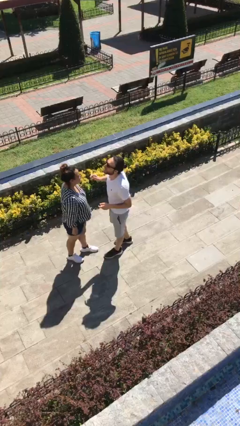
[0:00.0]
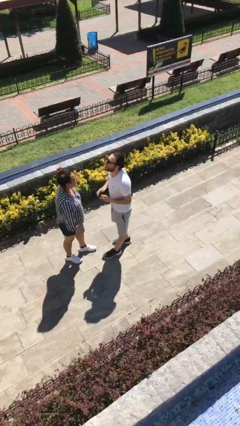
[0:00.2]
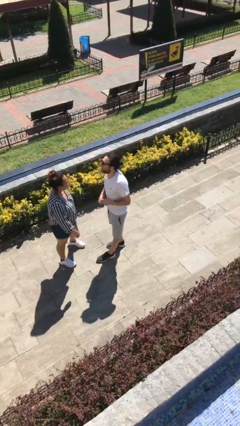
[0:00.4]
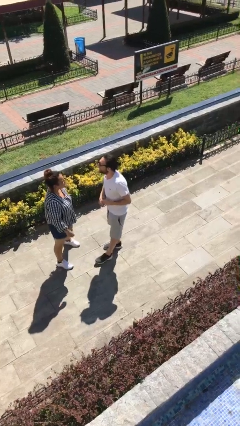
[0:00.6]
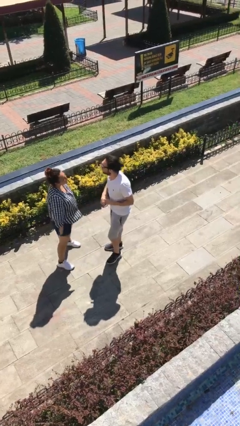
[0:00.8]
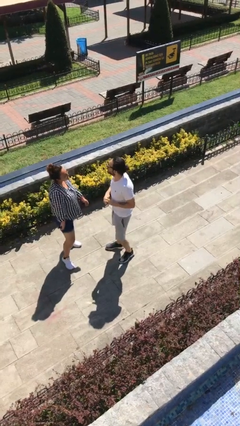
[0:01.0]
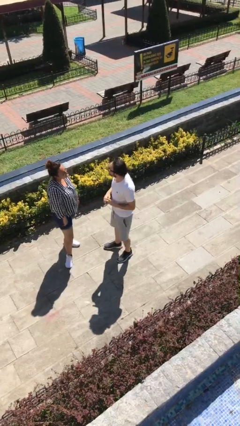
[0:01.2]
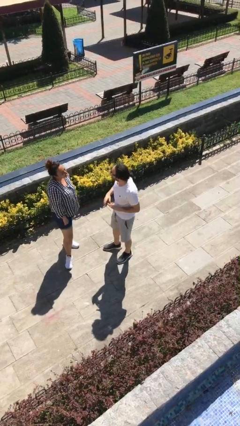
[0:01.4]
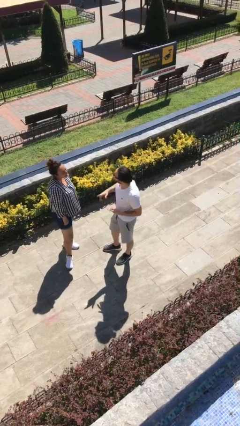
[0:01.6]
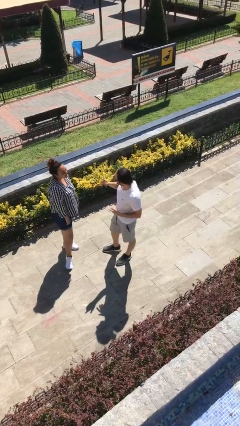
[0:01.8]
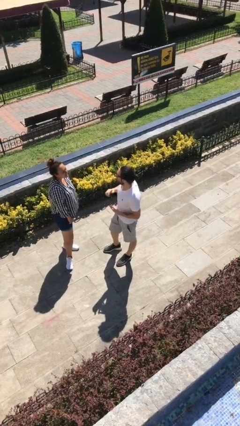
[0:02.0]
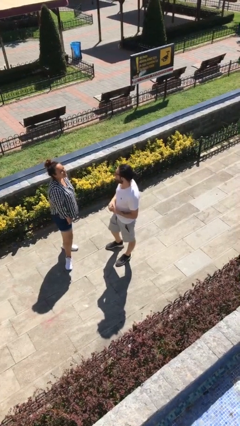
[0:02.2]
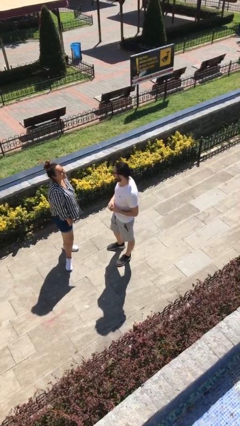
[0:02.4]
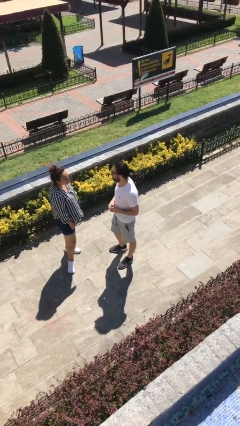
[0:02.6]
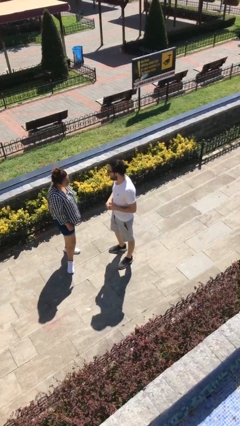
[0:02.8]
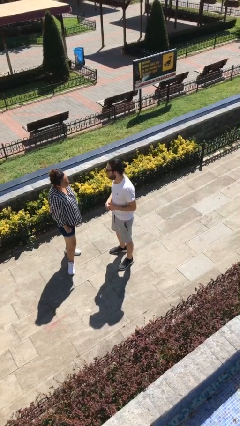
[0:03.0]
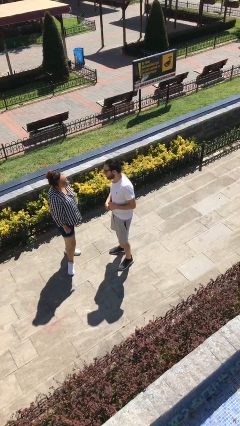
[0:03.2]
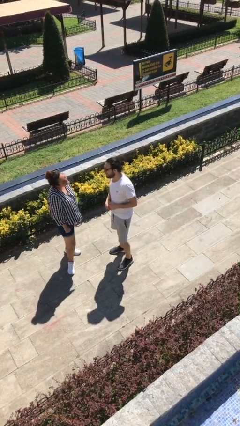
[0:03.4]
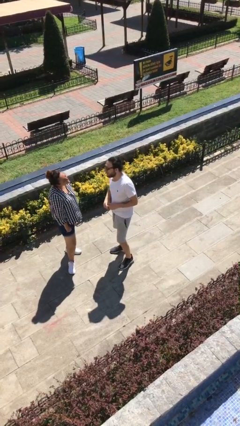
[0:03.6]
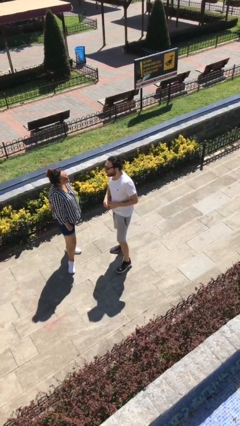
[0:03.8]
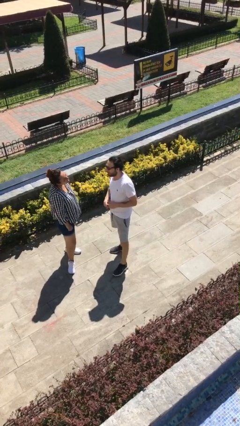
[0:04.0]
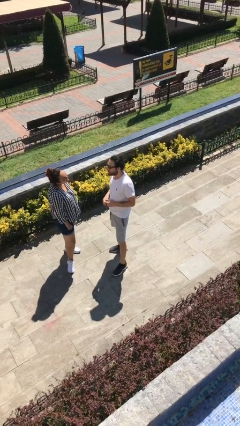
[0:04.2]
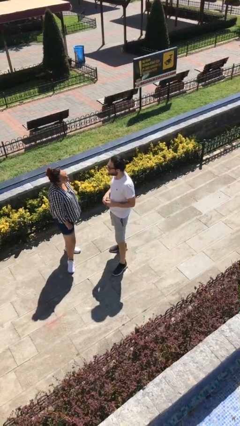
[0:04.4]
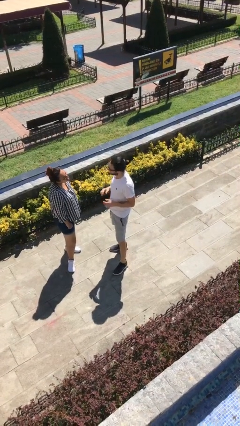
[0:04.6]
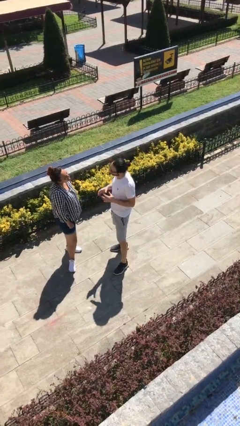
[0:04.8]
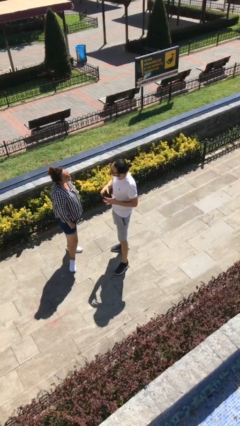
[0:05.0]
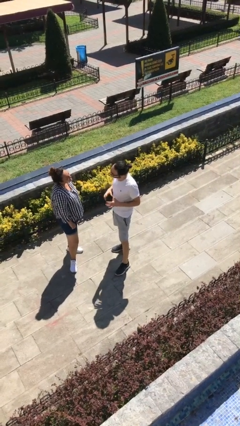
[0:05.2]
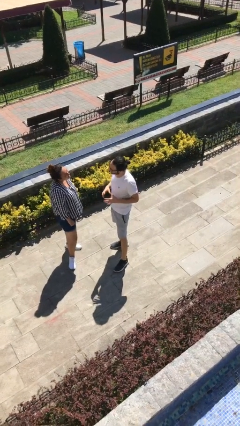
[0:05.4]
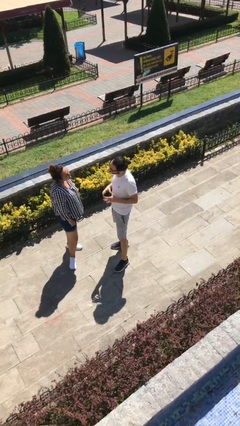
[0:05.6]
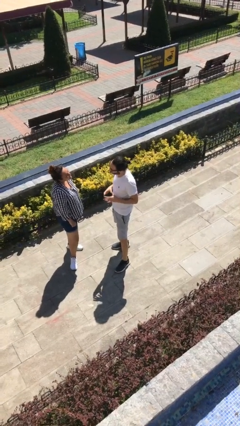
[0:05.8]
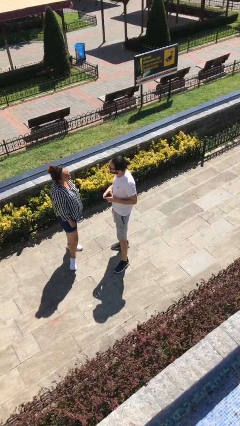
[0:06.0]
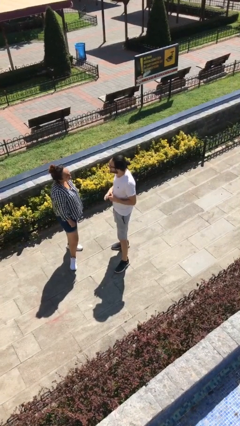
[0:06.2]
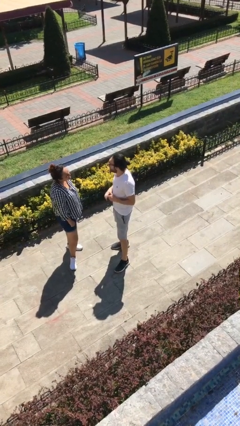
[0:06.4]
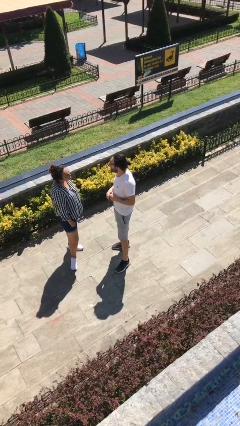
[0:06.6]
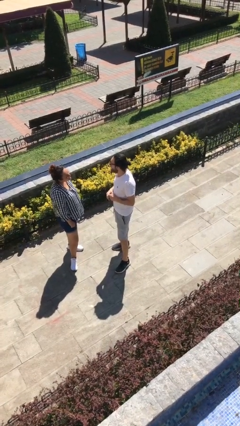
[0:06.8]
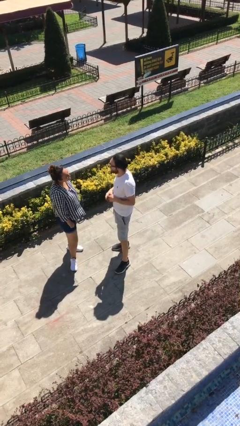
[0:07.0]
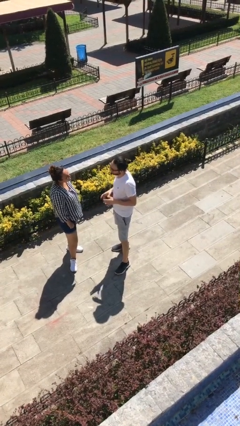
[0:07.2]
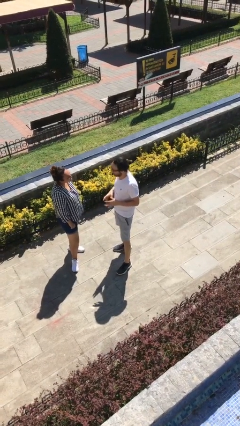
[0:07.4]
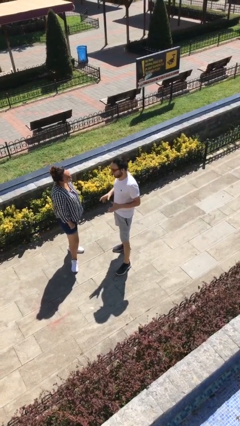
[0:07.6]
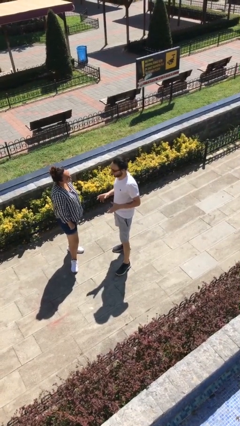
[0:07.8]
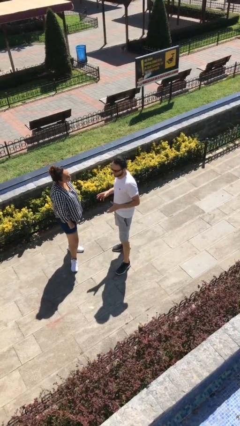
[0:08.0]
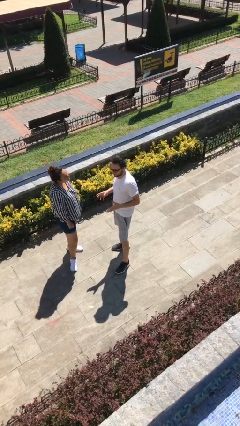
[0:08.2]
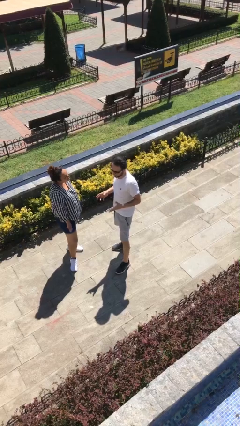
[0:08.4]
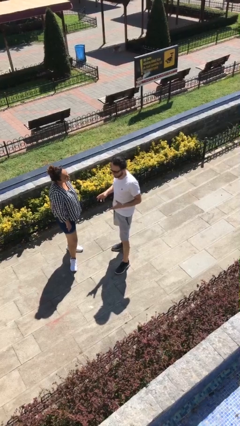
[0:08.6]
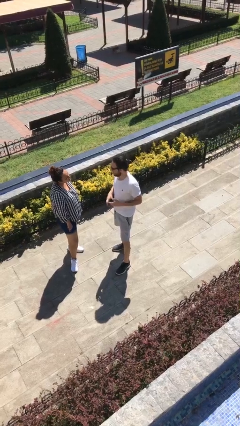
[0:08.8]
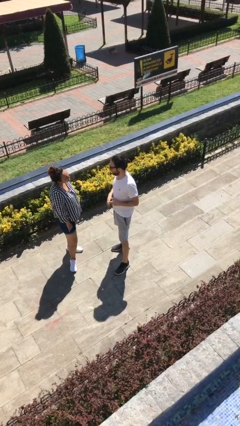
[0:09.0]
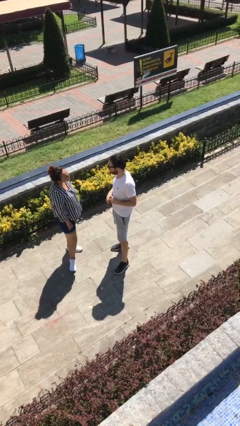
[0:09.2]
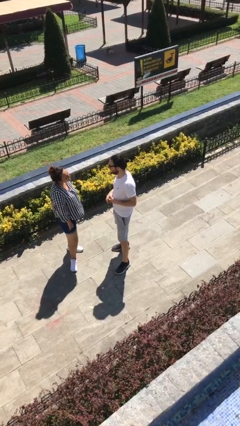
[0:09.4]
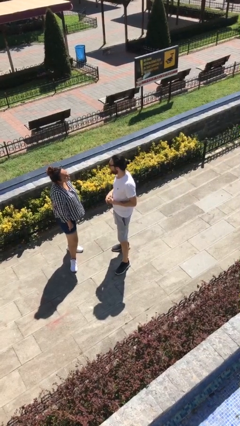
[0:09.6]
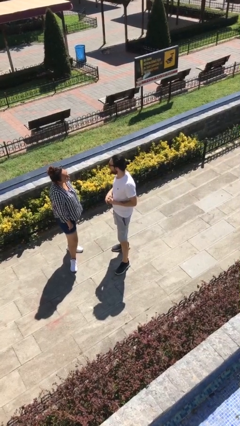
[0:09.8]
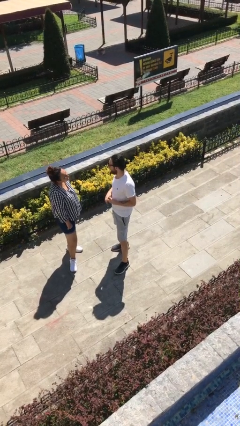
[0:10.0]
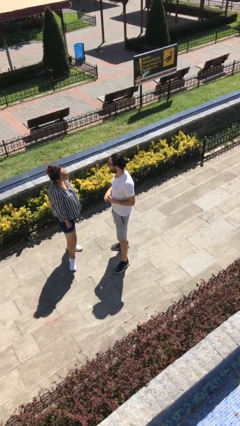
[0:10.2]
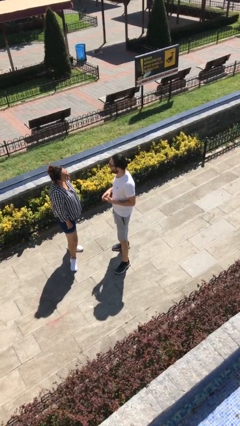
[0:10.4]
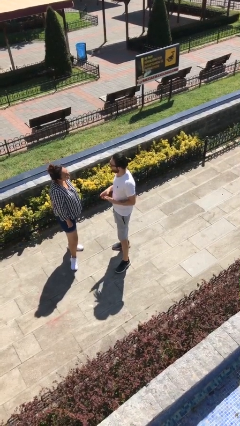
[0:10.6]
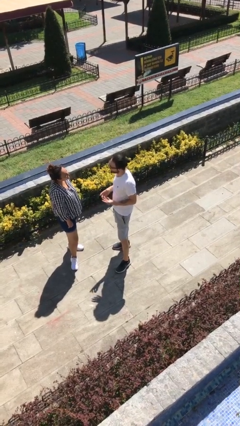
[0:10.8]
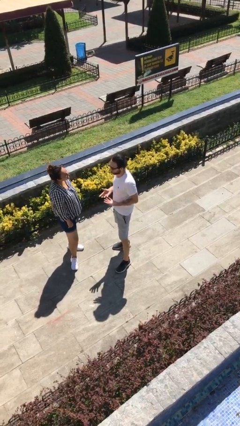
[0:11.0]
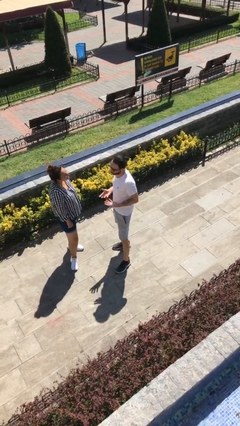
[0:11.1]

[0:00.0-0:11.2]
person talks to person

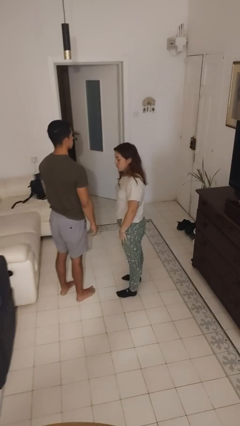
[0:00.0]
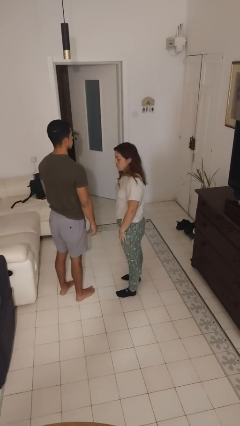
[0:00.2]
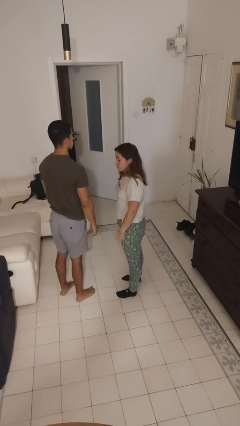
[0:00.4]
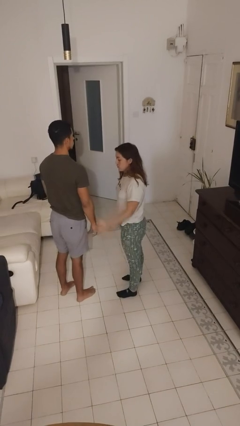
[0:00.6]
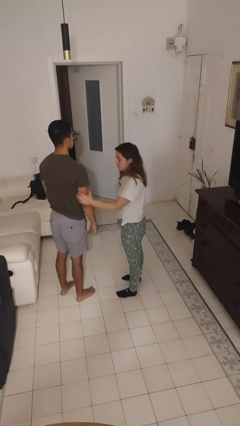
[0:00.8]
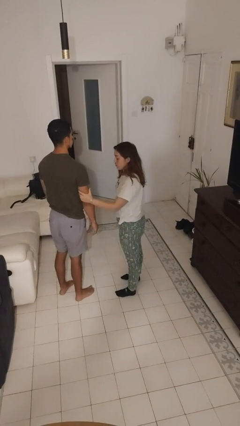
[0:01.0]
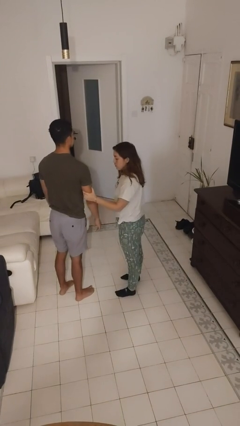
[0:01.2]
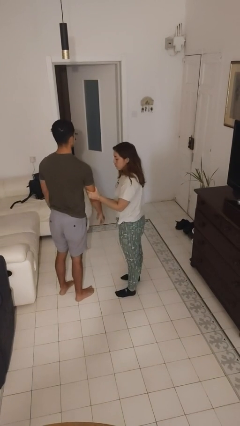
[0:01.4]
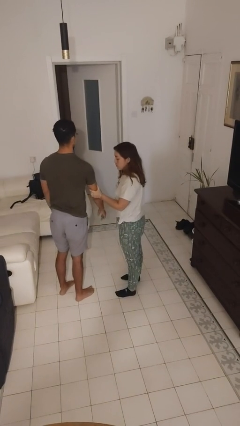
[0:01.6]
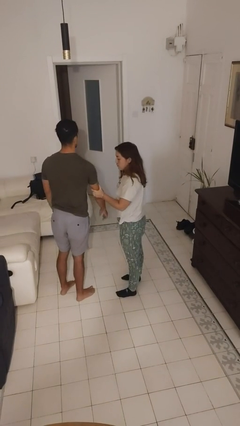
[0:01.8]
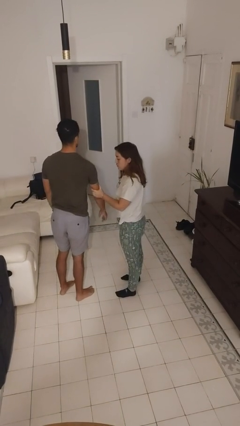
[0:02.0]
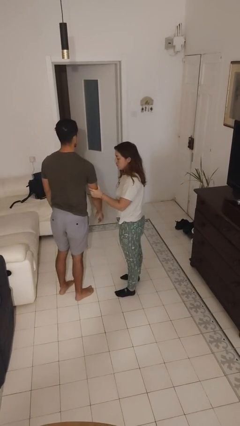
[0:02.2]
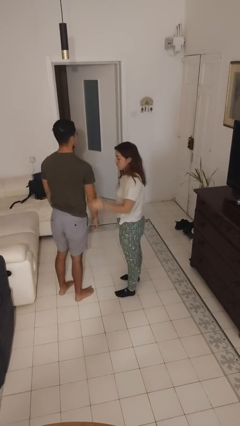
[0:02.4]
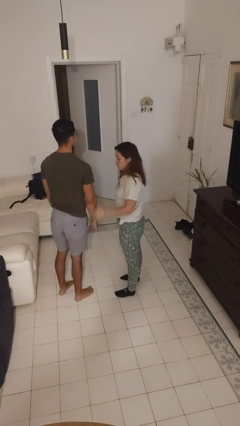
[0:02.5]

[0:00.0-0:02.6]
person grabs person by bicep

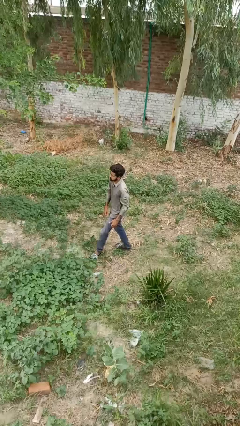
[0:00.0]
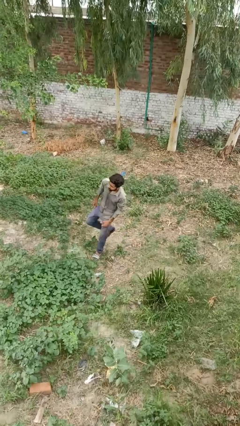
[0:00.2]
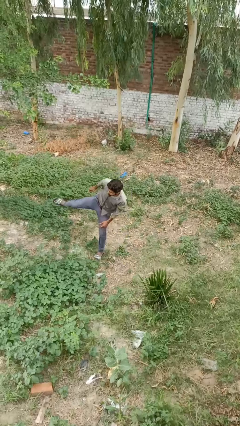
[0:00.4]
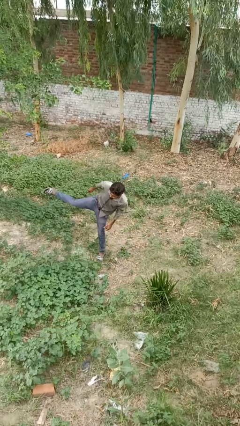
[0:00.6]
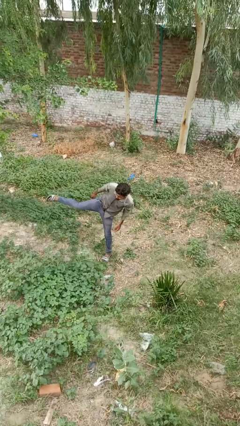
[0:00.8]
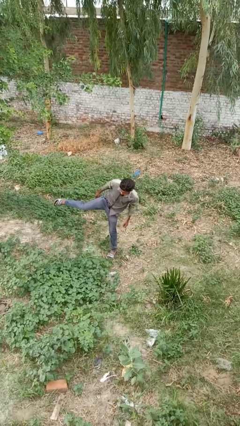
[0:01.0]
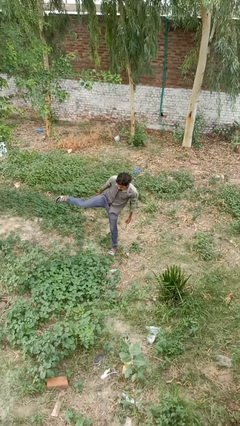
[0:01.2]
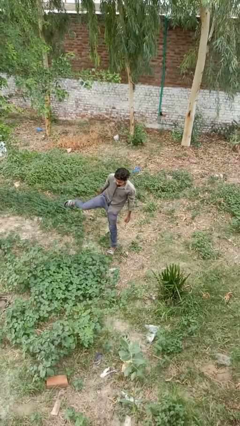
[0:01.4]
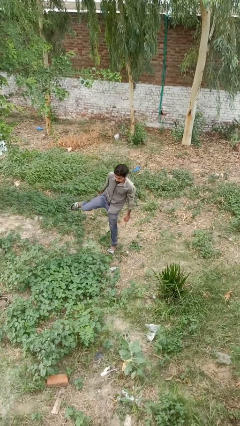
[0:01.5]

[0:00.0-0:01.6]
person karate kicks

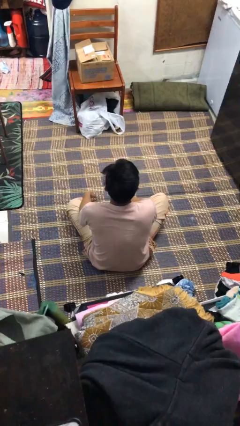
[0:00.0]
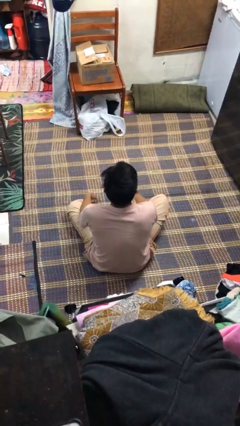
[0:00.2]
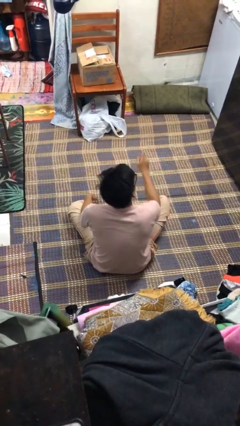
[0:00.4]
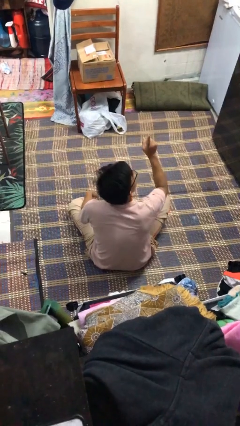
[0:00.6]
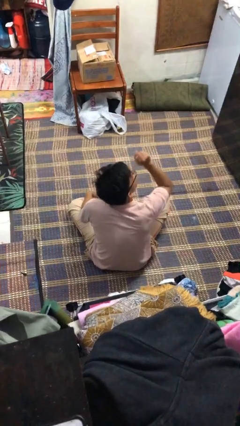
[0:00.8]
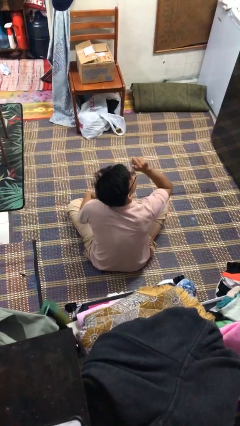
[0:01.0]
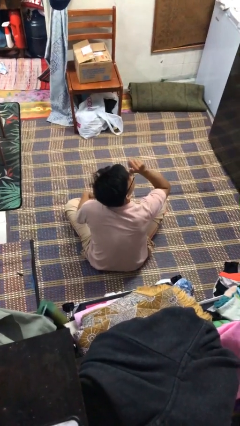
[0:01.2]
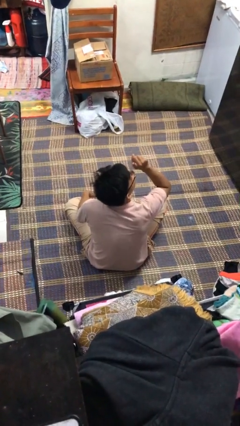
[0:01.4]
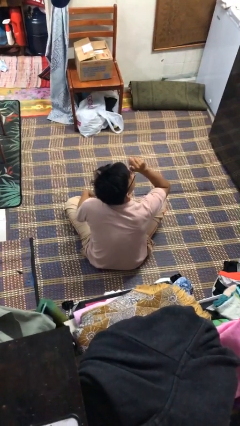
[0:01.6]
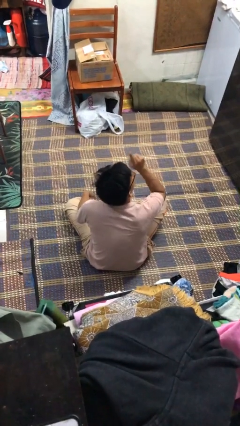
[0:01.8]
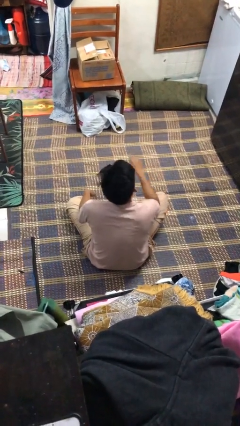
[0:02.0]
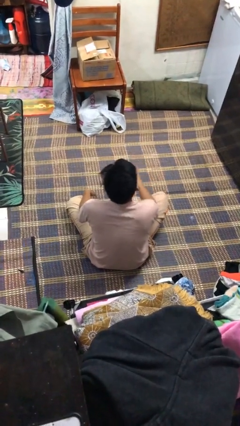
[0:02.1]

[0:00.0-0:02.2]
person gestures be quiet

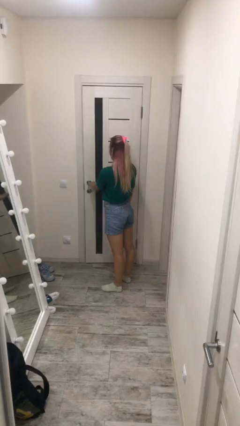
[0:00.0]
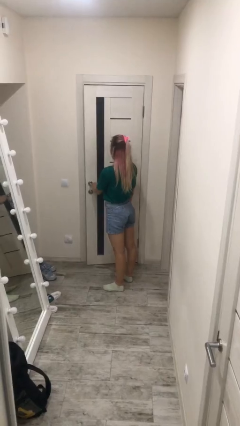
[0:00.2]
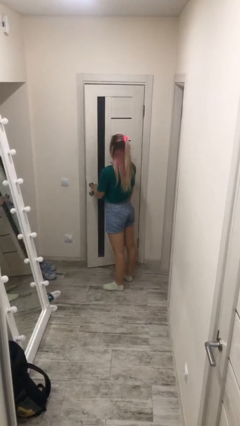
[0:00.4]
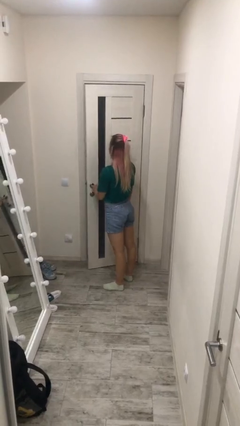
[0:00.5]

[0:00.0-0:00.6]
person opens facility door
